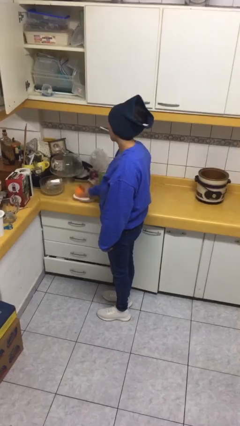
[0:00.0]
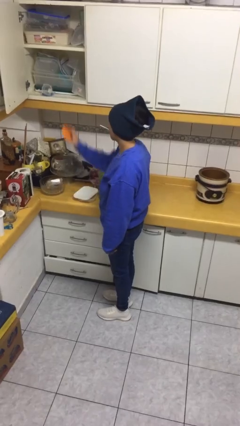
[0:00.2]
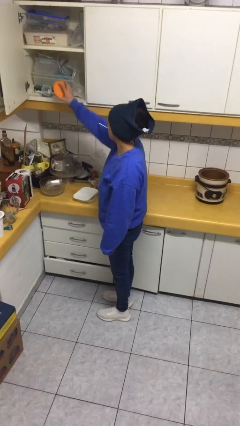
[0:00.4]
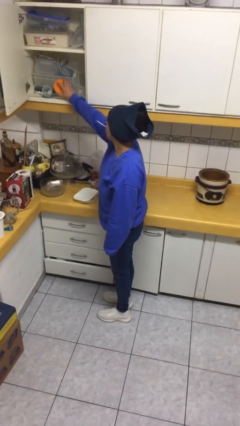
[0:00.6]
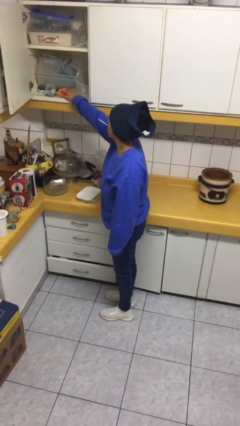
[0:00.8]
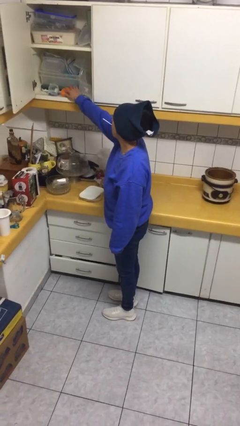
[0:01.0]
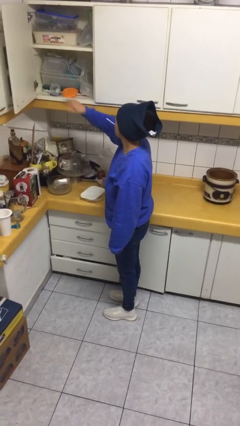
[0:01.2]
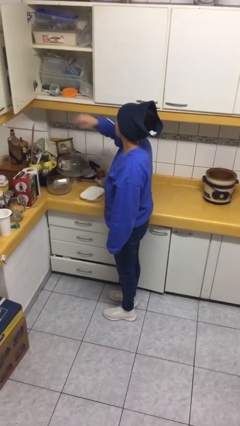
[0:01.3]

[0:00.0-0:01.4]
person puts object in cabinet

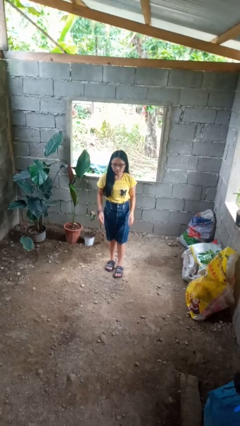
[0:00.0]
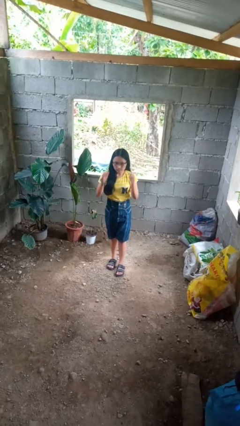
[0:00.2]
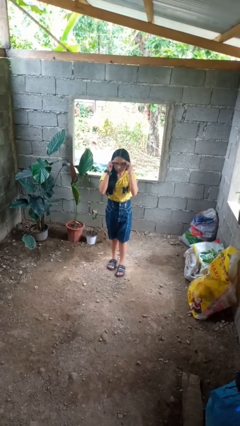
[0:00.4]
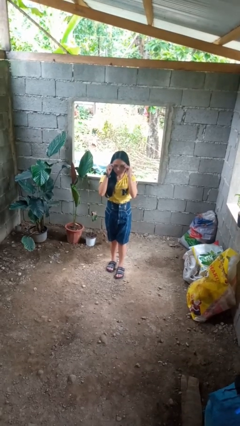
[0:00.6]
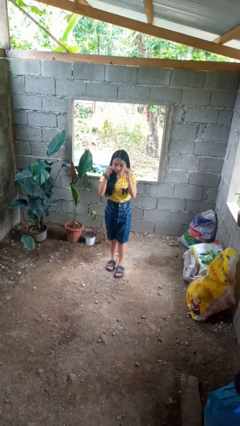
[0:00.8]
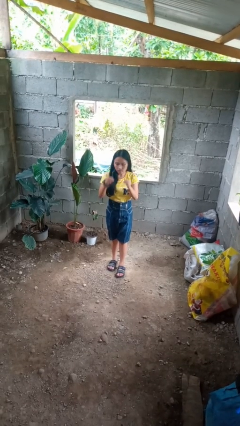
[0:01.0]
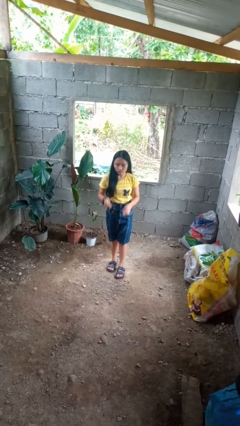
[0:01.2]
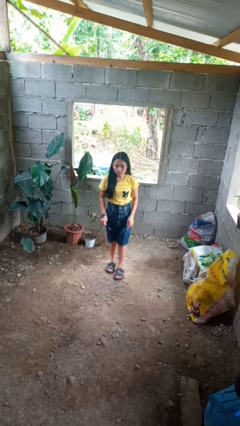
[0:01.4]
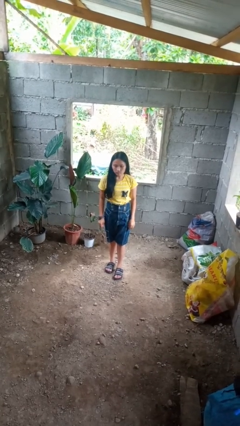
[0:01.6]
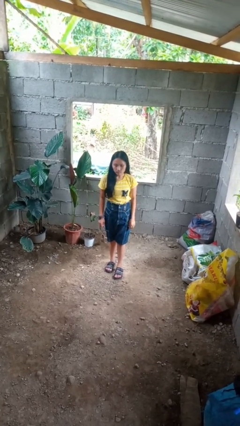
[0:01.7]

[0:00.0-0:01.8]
person takes off glasses

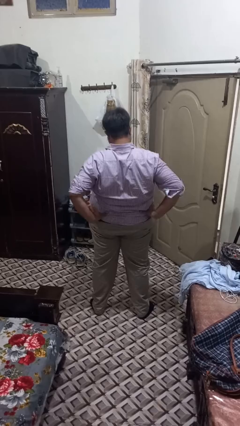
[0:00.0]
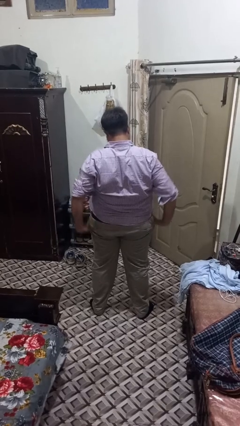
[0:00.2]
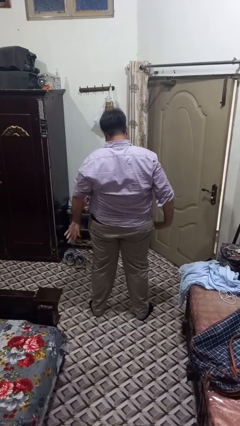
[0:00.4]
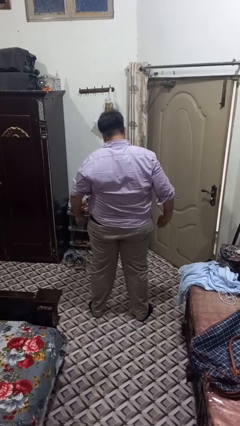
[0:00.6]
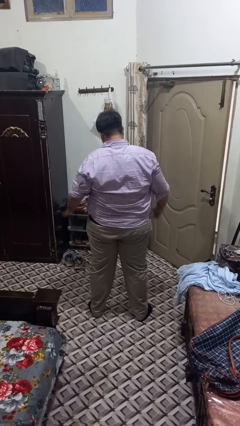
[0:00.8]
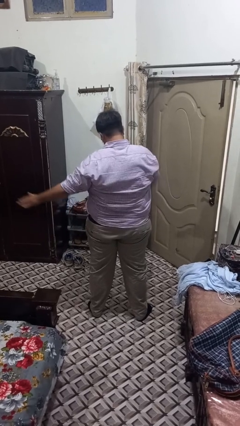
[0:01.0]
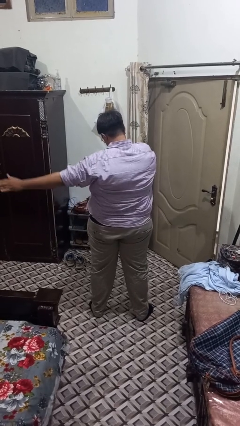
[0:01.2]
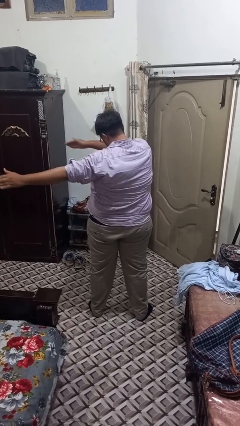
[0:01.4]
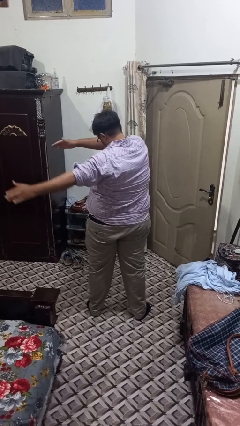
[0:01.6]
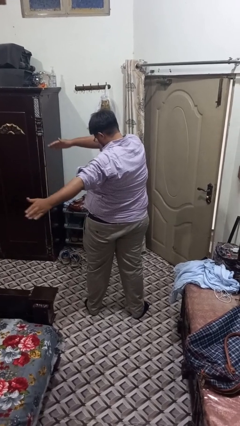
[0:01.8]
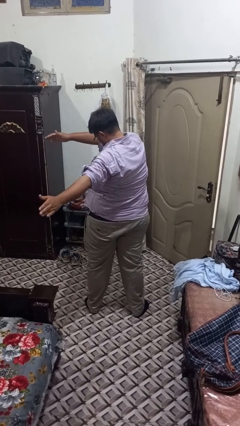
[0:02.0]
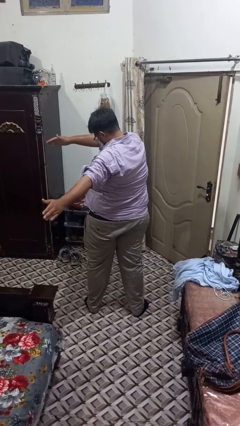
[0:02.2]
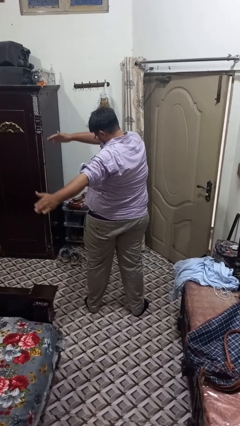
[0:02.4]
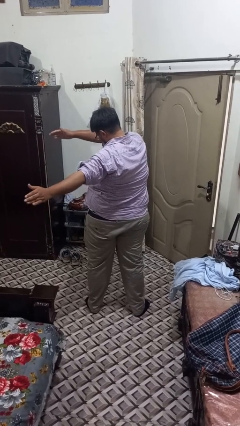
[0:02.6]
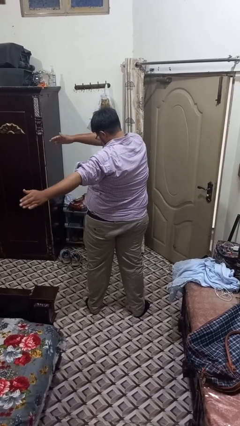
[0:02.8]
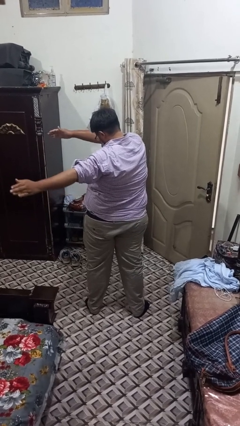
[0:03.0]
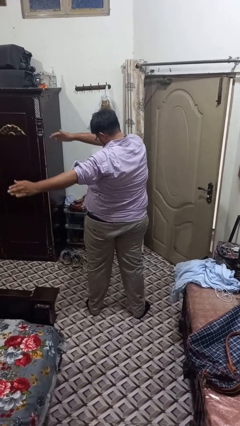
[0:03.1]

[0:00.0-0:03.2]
person stretches arms to side

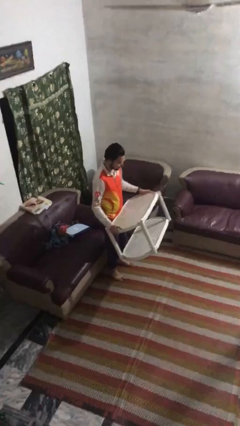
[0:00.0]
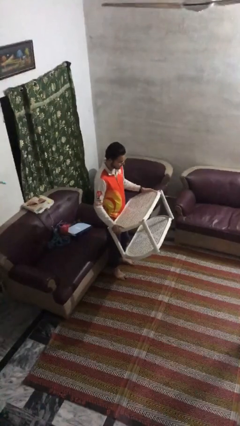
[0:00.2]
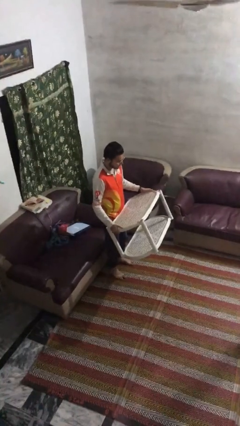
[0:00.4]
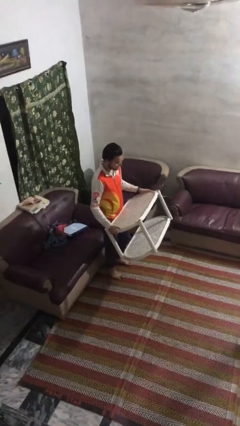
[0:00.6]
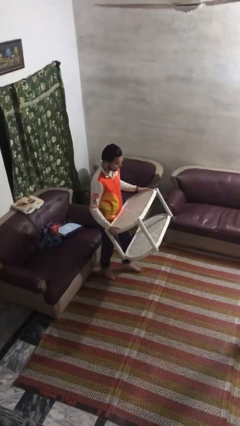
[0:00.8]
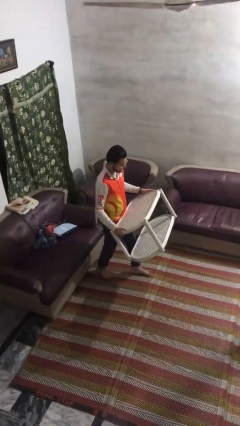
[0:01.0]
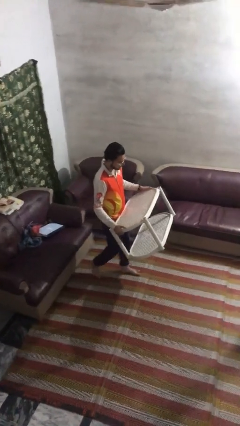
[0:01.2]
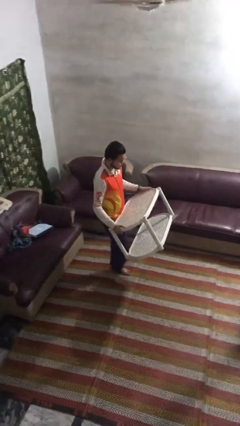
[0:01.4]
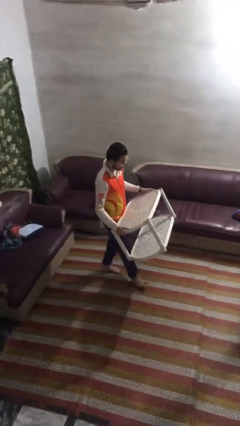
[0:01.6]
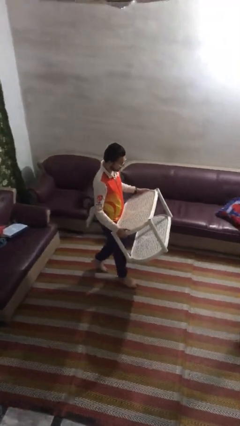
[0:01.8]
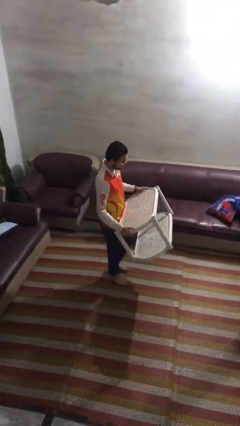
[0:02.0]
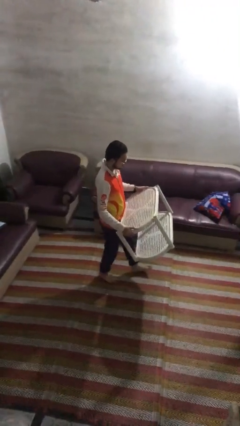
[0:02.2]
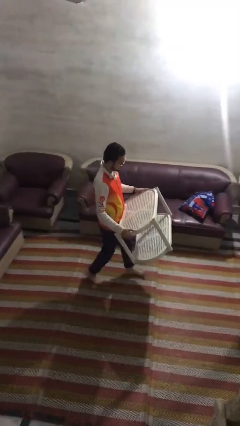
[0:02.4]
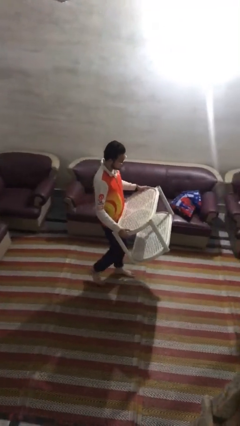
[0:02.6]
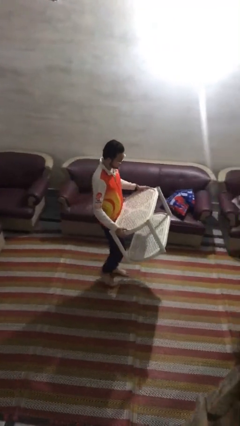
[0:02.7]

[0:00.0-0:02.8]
person carries furniture

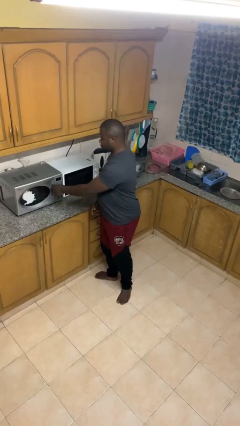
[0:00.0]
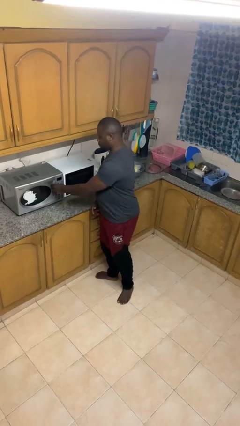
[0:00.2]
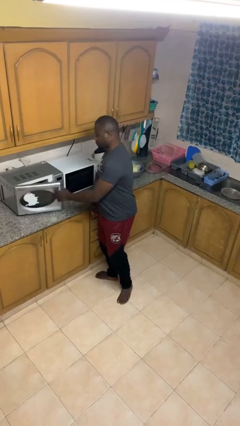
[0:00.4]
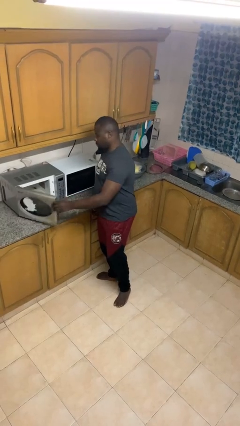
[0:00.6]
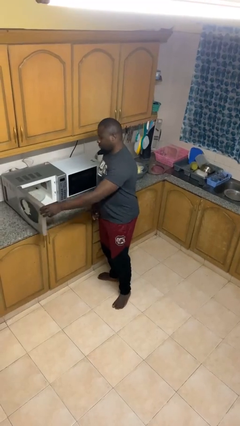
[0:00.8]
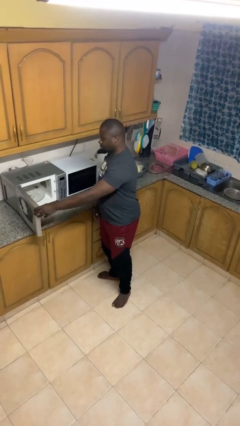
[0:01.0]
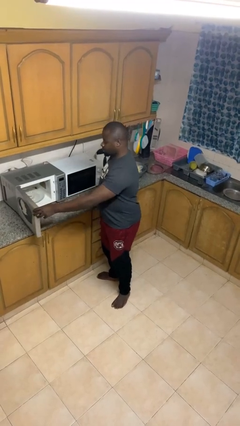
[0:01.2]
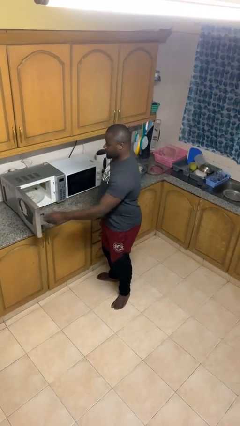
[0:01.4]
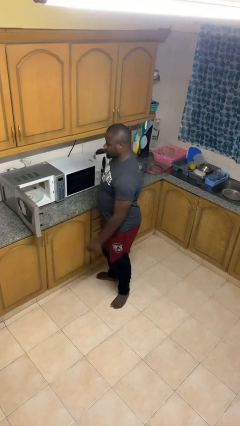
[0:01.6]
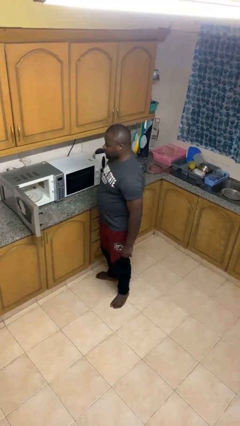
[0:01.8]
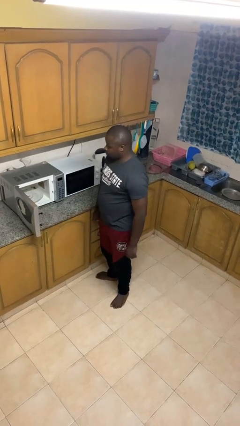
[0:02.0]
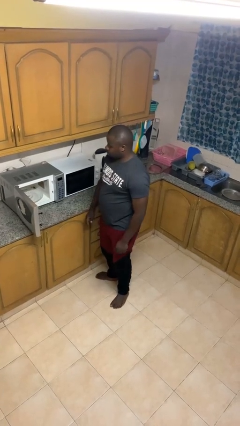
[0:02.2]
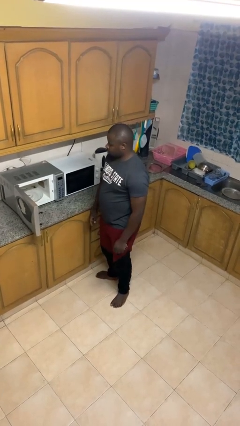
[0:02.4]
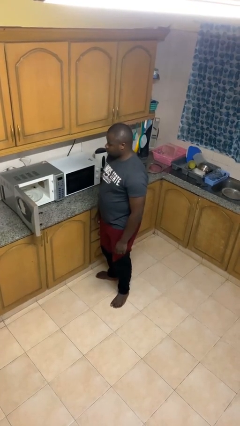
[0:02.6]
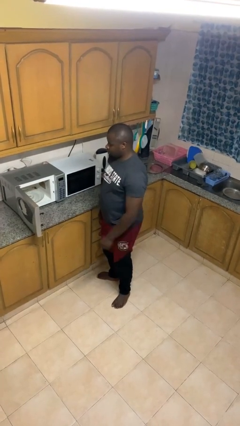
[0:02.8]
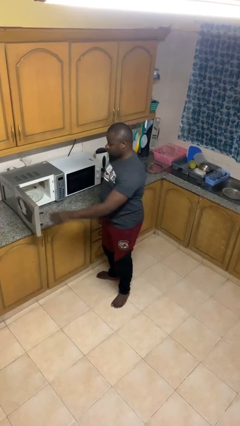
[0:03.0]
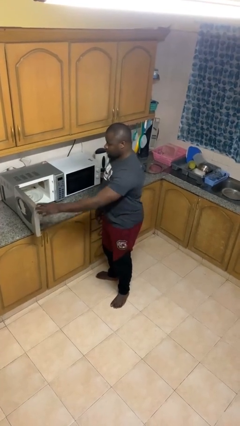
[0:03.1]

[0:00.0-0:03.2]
person opens microwave

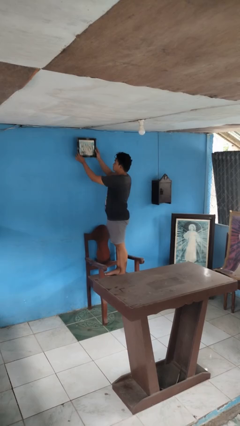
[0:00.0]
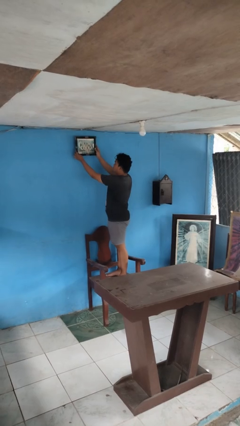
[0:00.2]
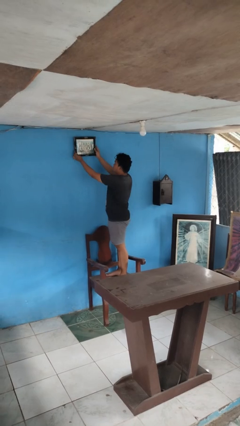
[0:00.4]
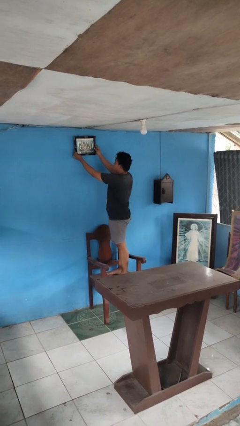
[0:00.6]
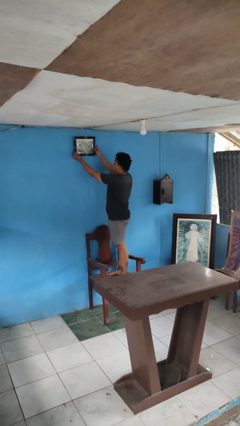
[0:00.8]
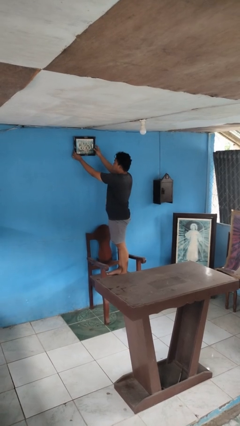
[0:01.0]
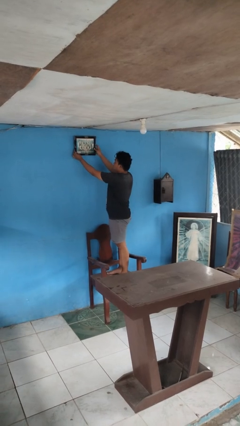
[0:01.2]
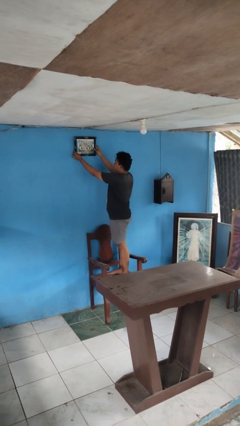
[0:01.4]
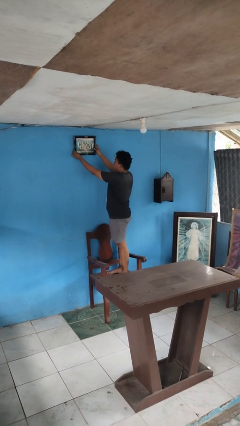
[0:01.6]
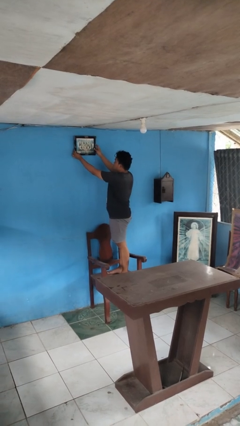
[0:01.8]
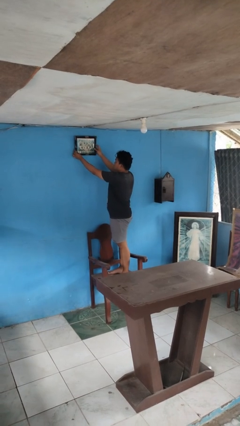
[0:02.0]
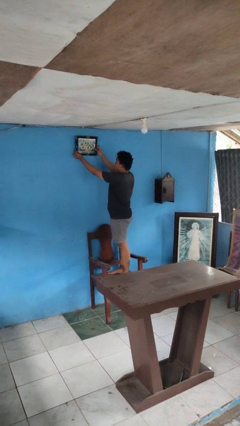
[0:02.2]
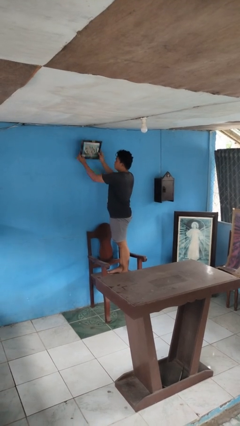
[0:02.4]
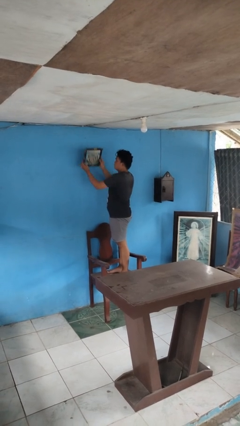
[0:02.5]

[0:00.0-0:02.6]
person puts up picture frame

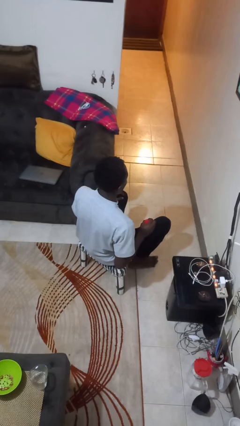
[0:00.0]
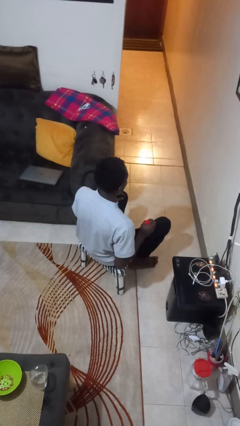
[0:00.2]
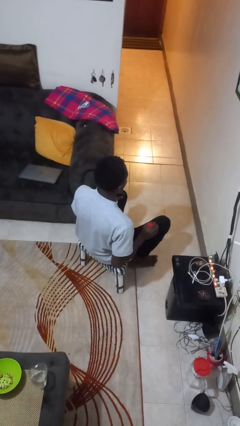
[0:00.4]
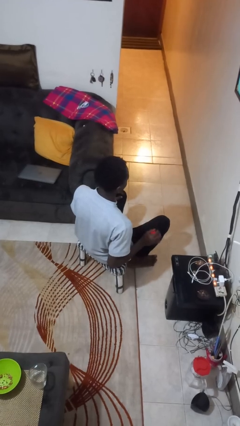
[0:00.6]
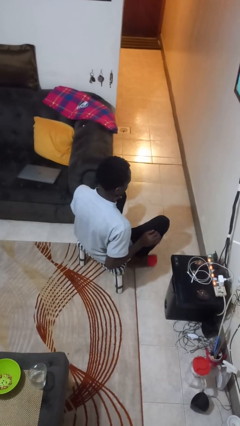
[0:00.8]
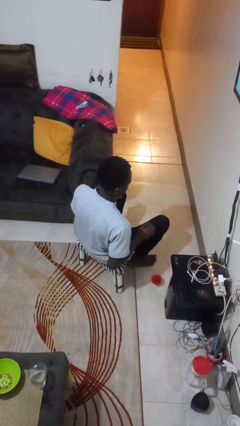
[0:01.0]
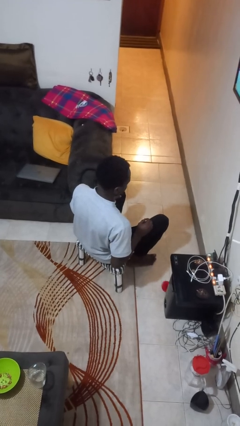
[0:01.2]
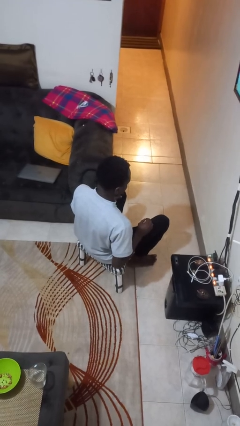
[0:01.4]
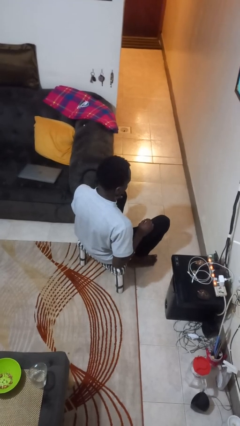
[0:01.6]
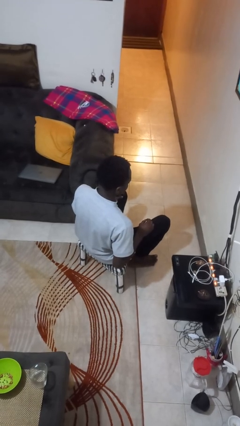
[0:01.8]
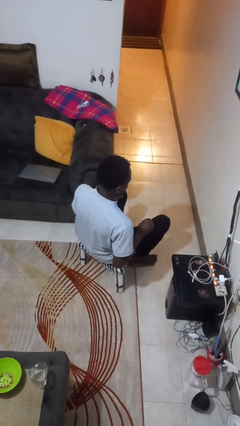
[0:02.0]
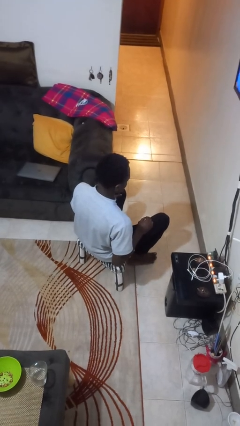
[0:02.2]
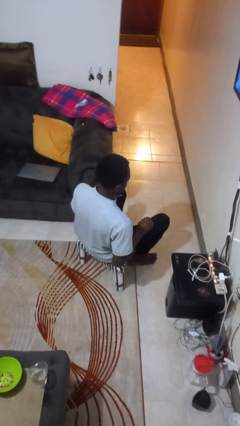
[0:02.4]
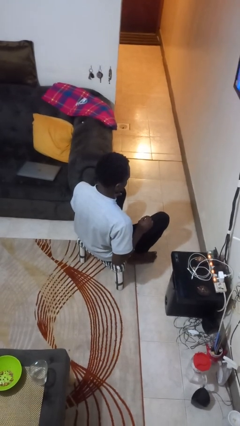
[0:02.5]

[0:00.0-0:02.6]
person drops object
